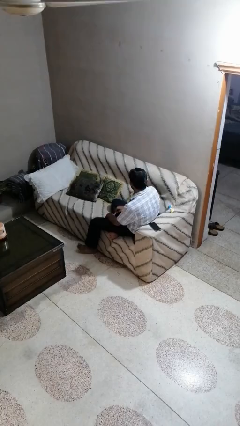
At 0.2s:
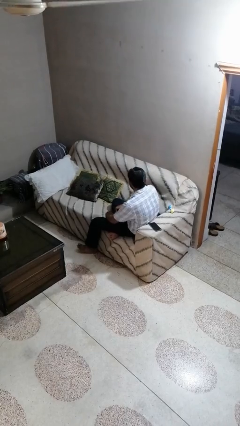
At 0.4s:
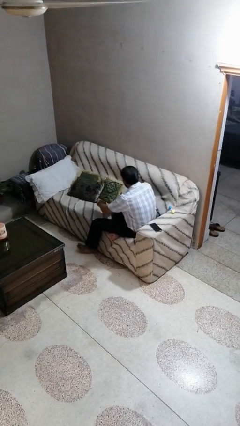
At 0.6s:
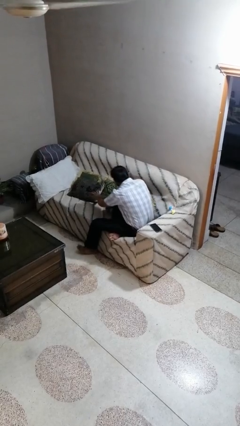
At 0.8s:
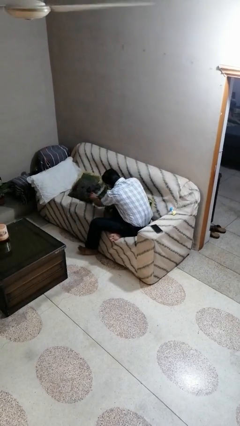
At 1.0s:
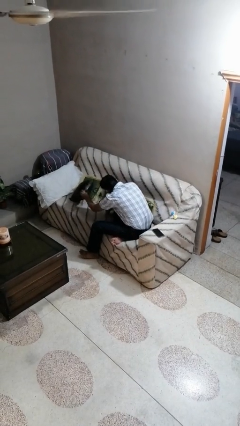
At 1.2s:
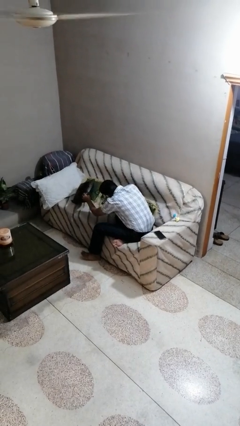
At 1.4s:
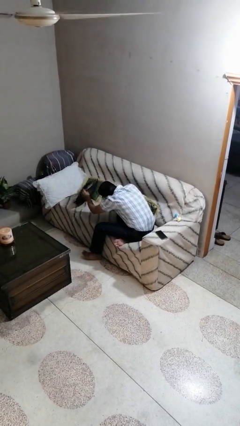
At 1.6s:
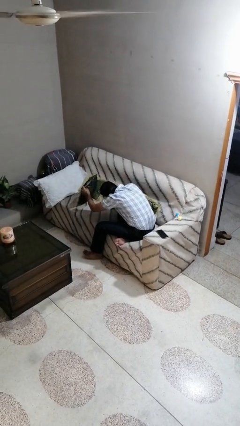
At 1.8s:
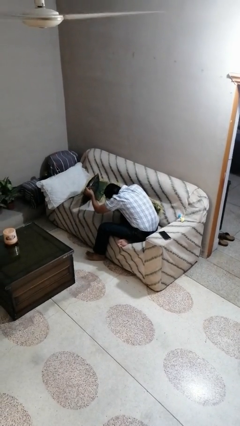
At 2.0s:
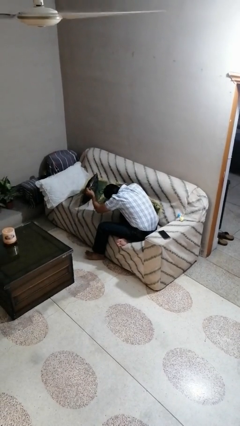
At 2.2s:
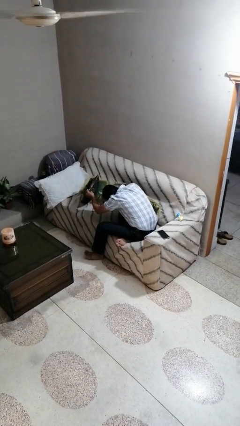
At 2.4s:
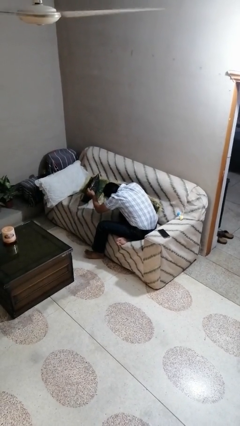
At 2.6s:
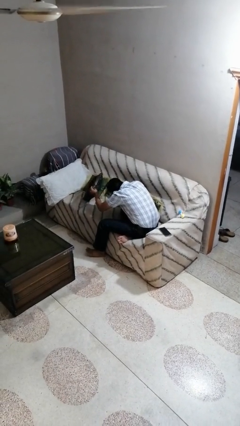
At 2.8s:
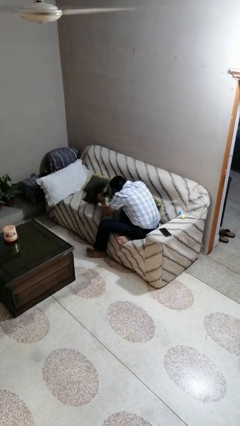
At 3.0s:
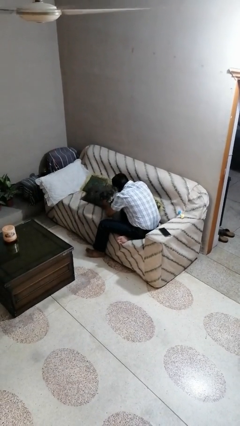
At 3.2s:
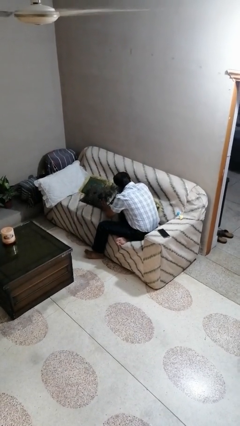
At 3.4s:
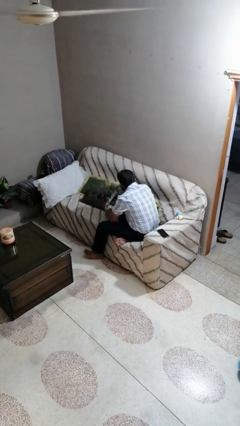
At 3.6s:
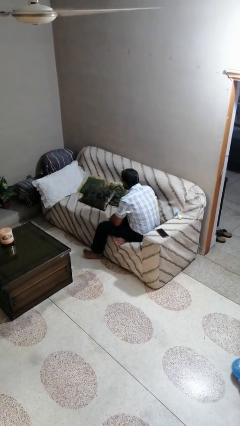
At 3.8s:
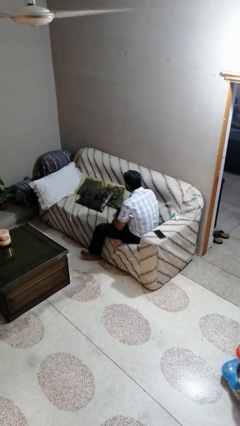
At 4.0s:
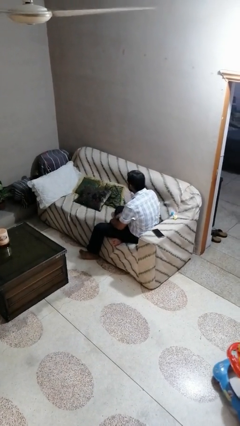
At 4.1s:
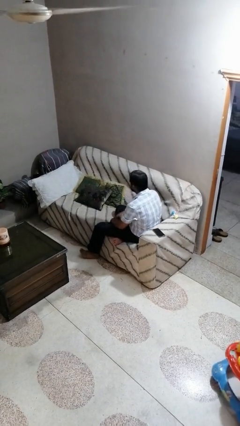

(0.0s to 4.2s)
person searches in couch

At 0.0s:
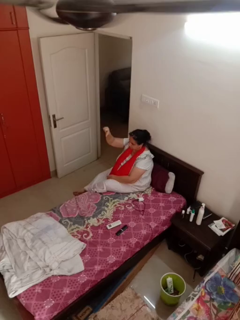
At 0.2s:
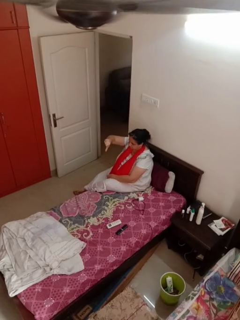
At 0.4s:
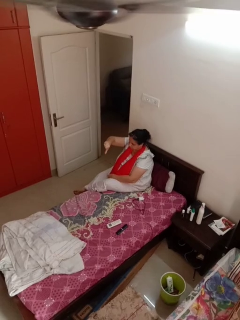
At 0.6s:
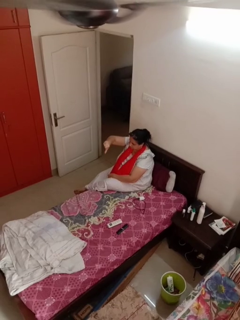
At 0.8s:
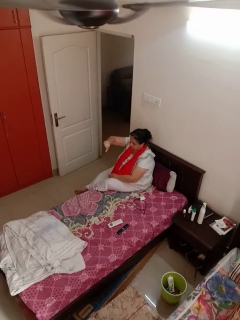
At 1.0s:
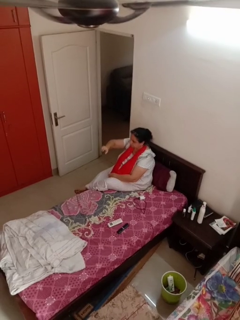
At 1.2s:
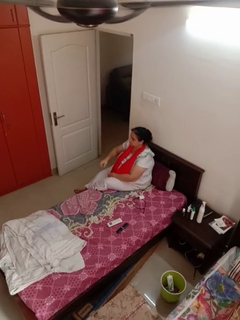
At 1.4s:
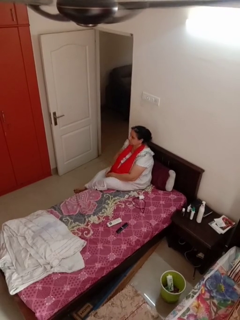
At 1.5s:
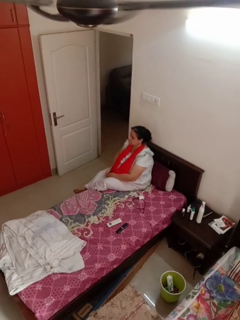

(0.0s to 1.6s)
person gestures thumbs down

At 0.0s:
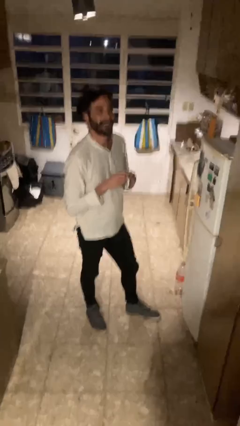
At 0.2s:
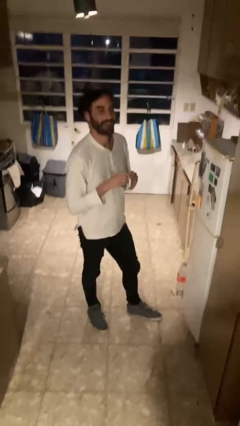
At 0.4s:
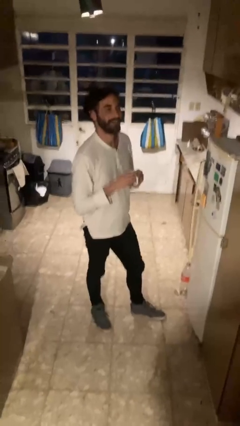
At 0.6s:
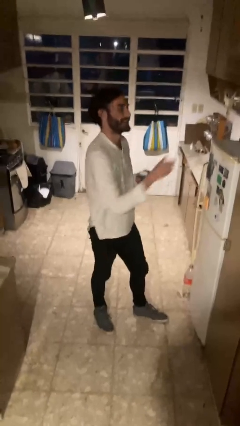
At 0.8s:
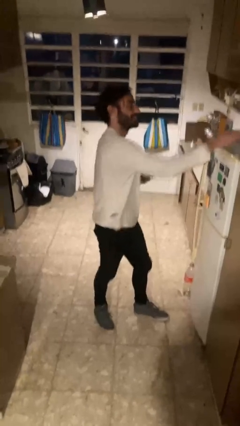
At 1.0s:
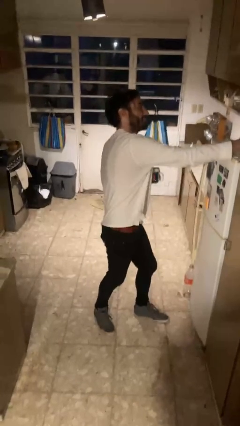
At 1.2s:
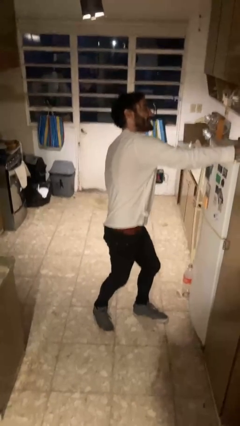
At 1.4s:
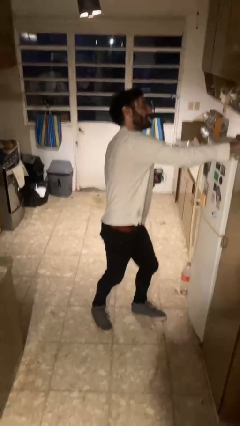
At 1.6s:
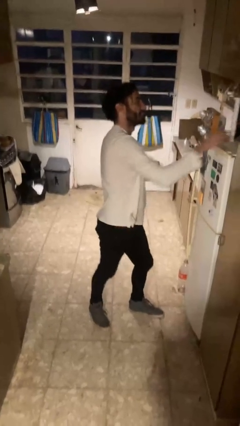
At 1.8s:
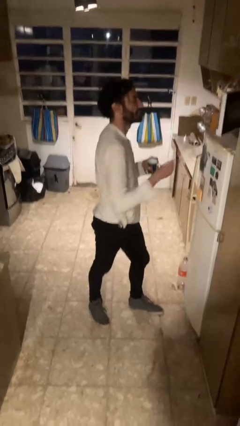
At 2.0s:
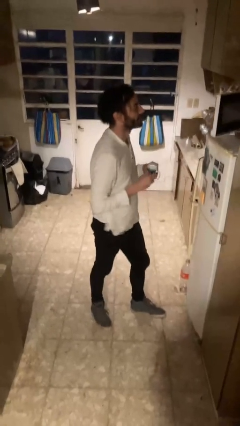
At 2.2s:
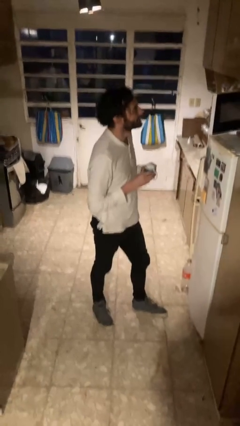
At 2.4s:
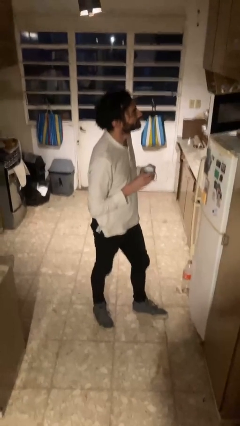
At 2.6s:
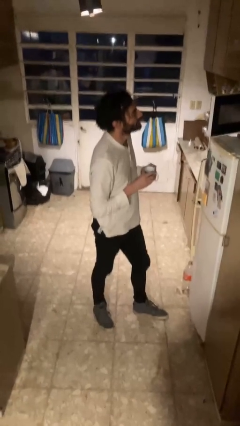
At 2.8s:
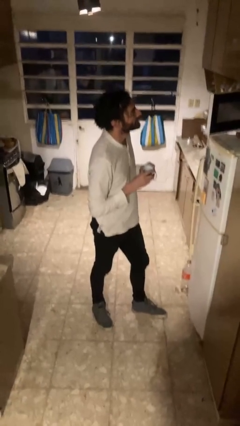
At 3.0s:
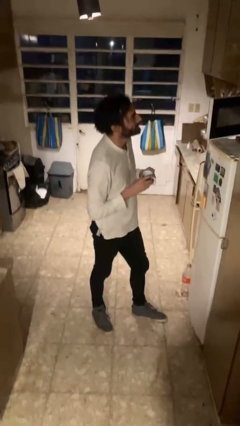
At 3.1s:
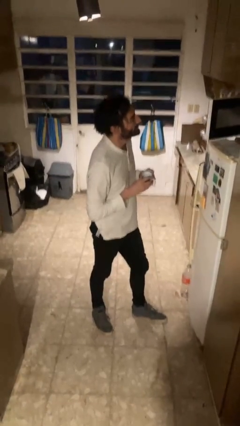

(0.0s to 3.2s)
person opens microwave

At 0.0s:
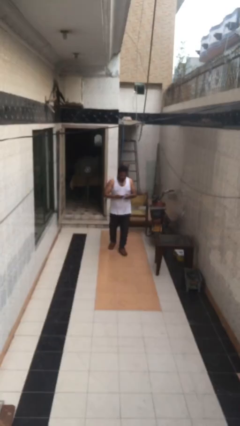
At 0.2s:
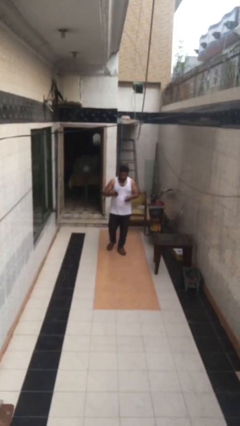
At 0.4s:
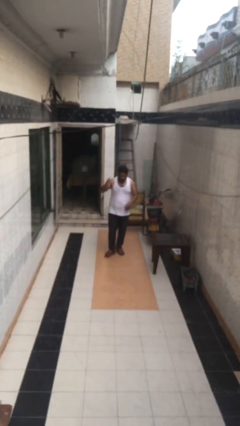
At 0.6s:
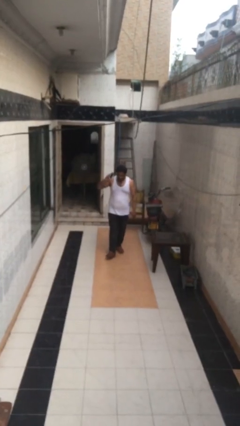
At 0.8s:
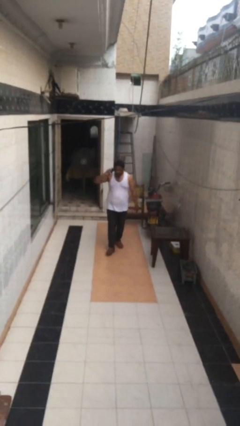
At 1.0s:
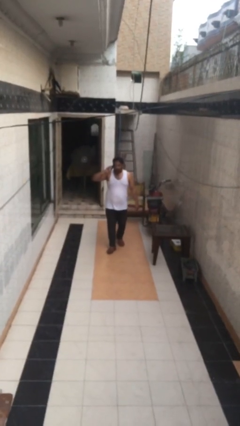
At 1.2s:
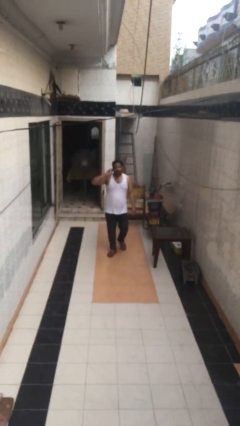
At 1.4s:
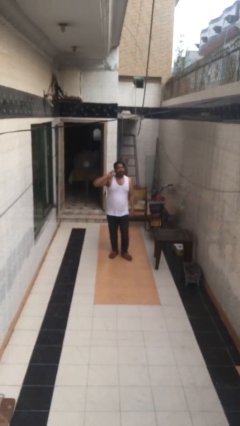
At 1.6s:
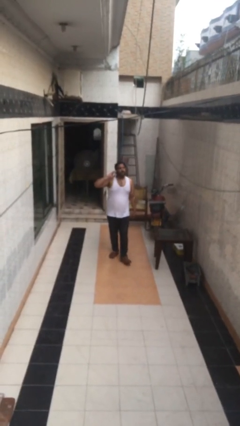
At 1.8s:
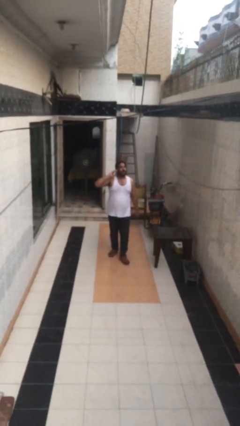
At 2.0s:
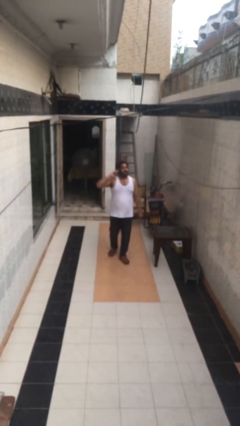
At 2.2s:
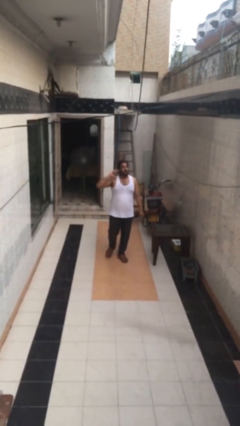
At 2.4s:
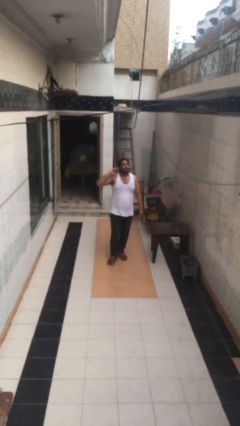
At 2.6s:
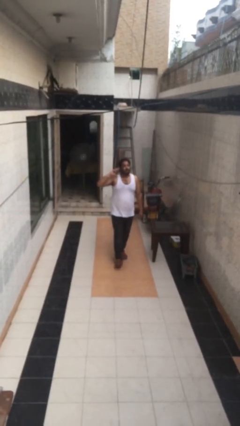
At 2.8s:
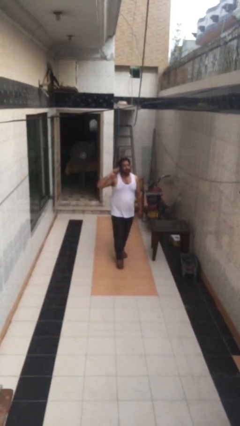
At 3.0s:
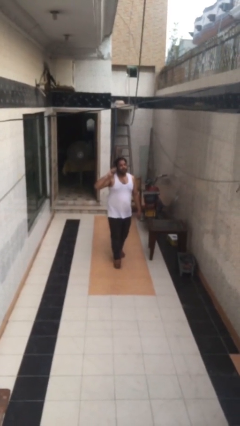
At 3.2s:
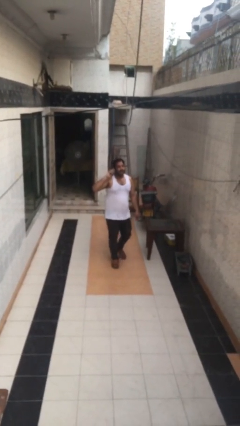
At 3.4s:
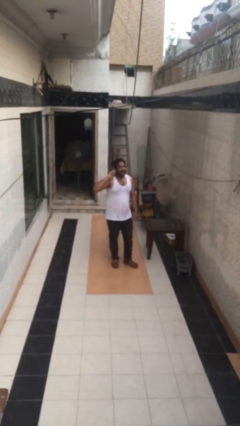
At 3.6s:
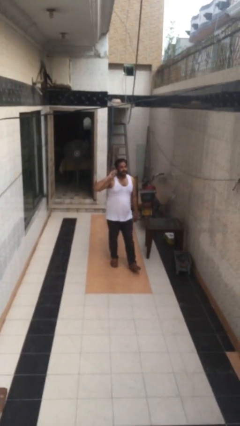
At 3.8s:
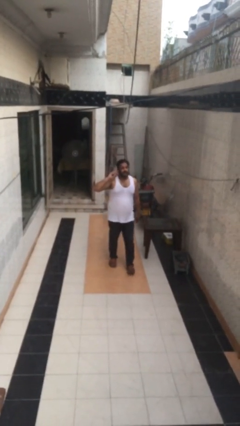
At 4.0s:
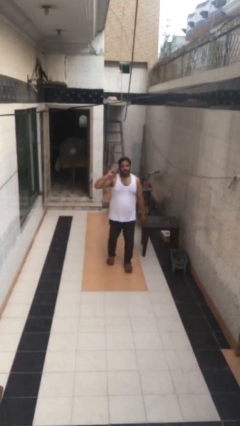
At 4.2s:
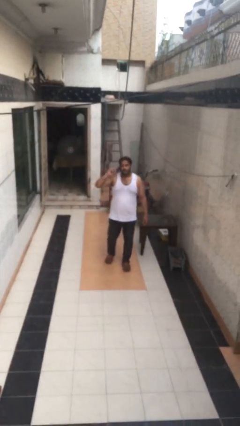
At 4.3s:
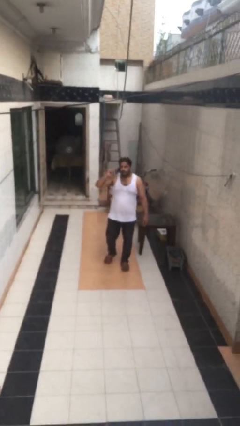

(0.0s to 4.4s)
person talks on phone

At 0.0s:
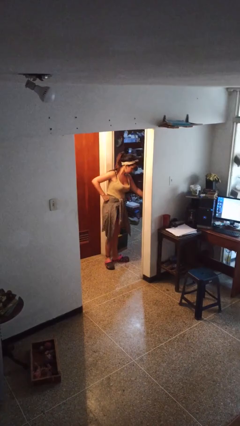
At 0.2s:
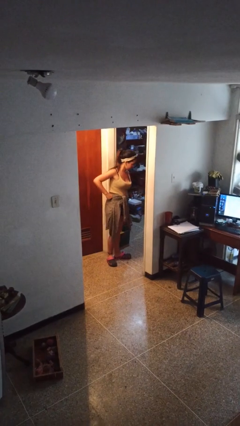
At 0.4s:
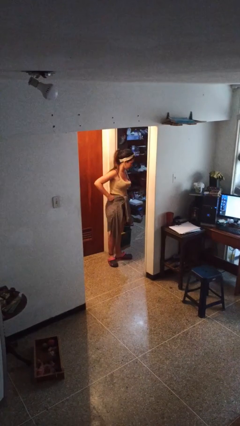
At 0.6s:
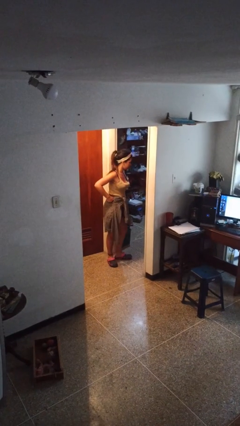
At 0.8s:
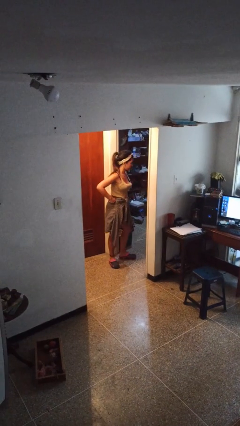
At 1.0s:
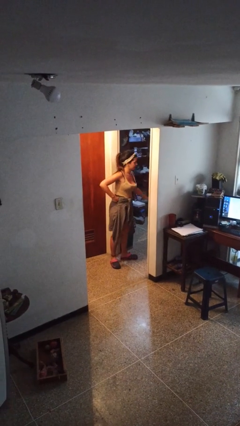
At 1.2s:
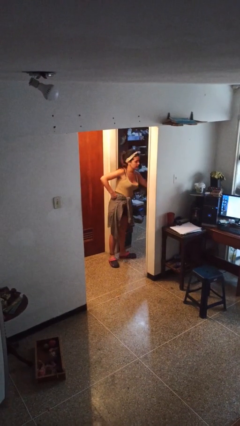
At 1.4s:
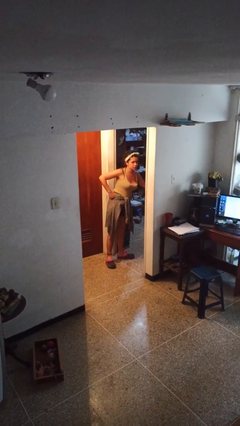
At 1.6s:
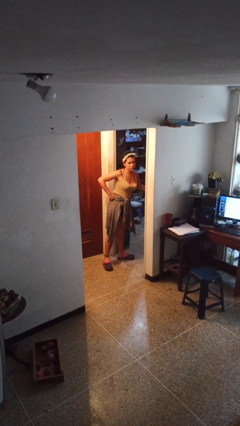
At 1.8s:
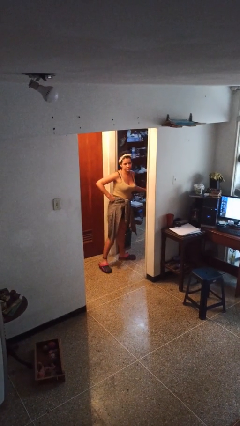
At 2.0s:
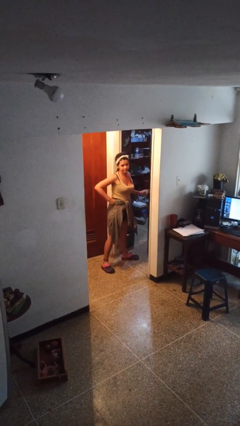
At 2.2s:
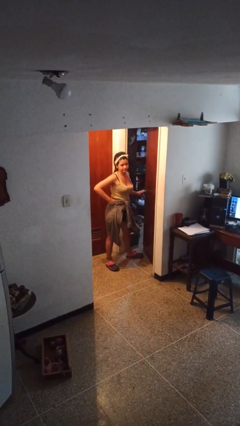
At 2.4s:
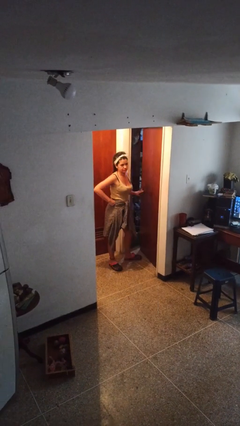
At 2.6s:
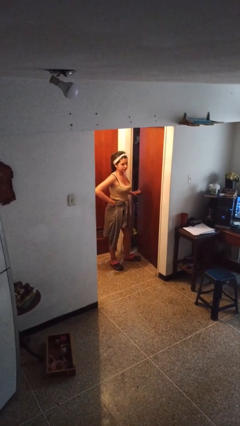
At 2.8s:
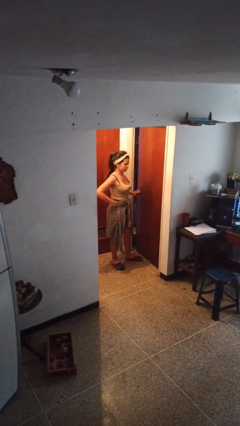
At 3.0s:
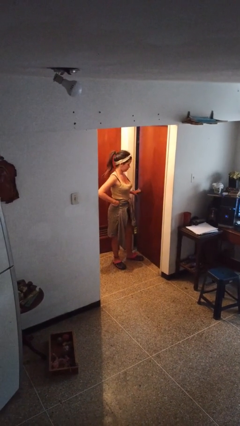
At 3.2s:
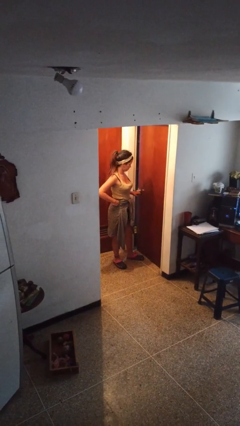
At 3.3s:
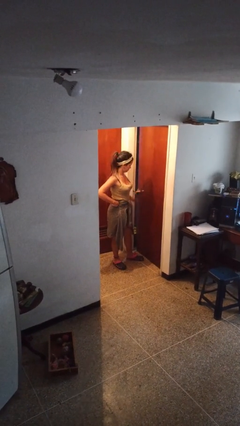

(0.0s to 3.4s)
person closes facility door

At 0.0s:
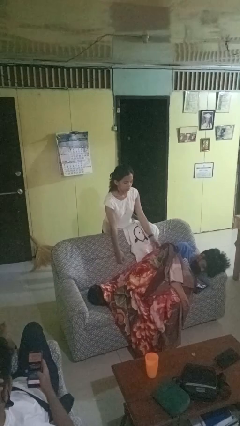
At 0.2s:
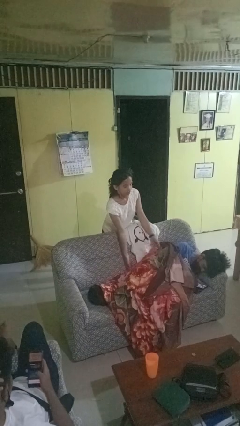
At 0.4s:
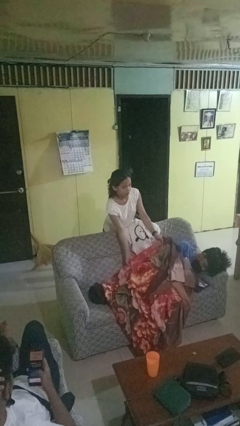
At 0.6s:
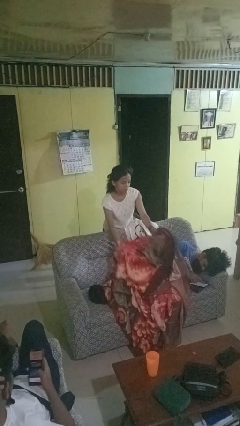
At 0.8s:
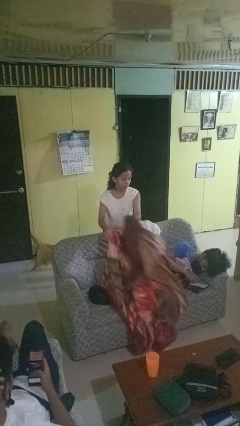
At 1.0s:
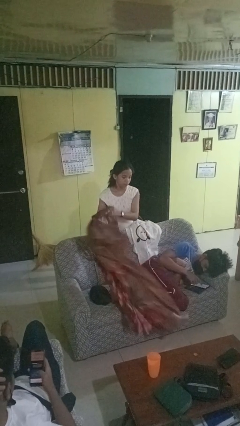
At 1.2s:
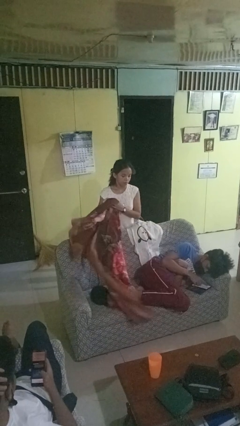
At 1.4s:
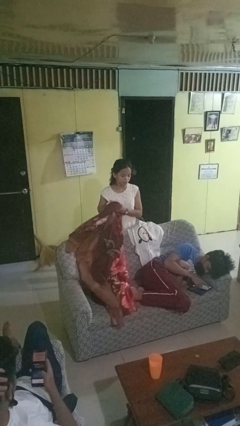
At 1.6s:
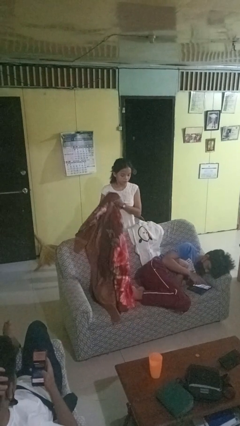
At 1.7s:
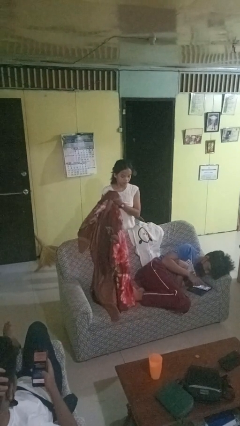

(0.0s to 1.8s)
person uncovers friend with blanket
